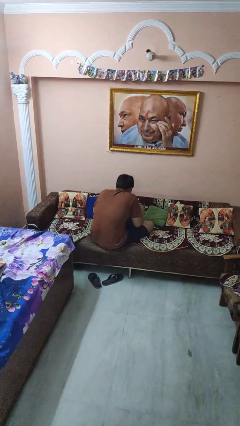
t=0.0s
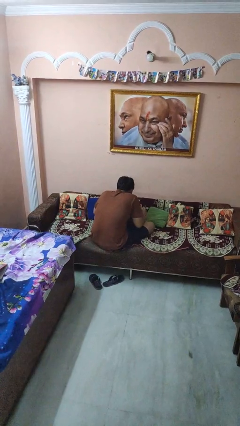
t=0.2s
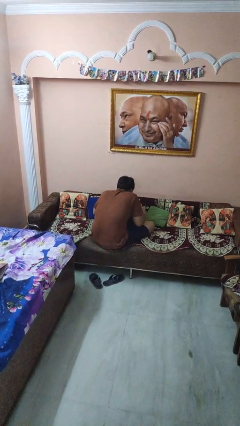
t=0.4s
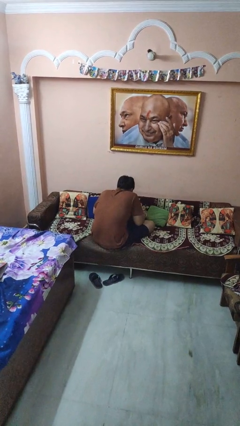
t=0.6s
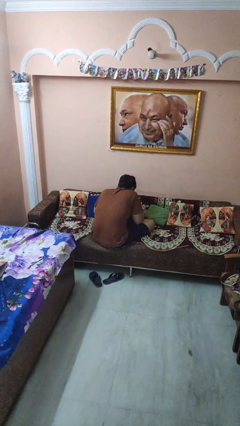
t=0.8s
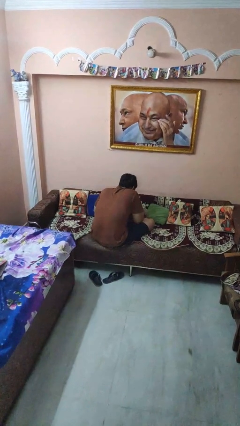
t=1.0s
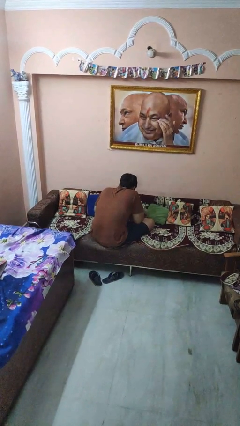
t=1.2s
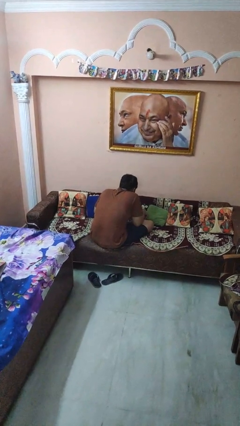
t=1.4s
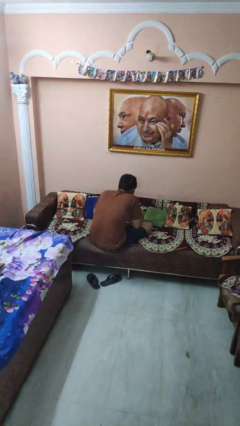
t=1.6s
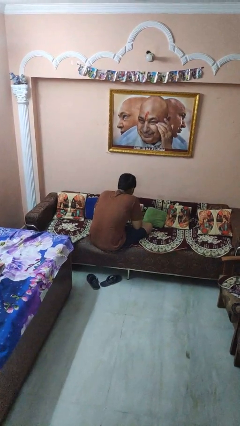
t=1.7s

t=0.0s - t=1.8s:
person searches in couch

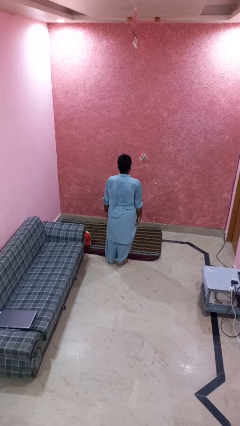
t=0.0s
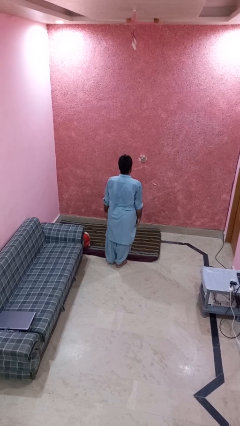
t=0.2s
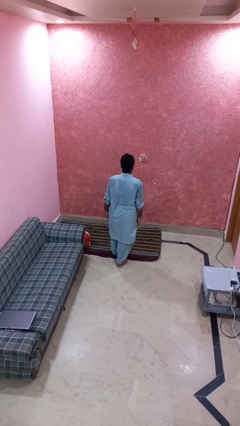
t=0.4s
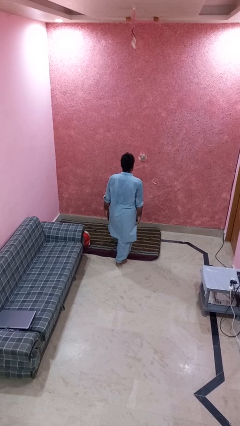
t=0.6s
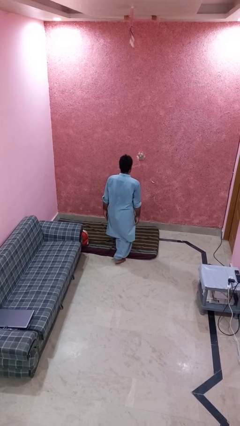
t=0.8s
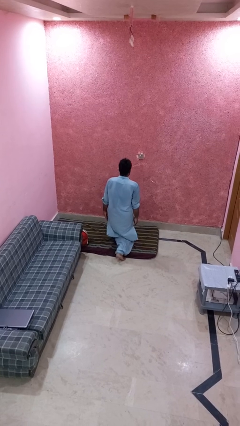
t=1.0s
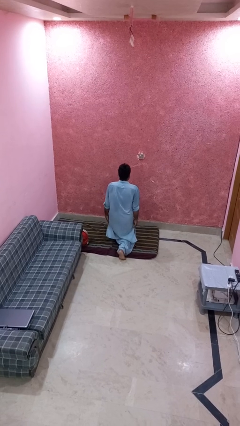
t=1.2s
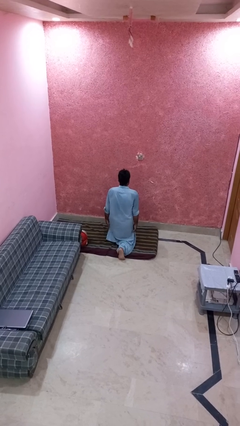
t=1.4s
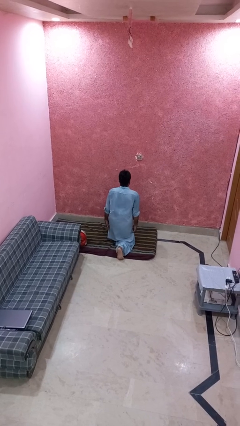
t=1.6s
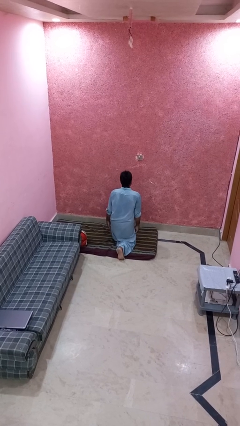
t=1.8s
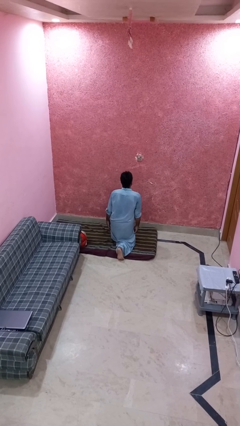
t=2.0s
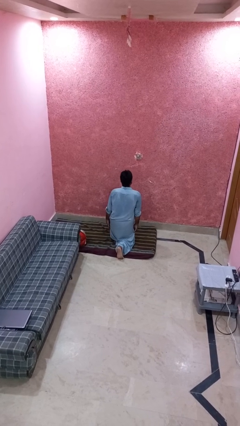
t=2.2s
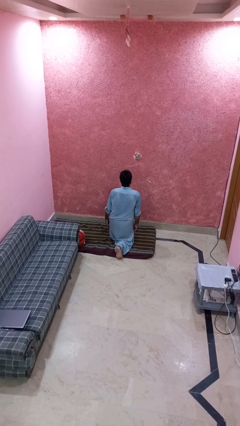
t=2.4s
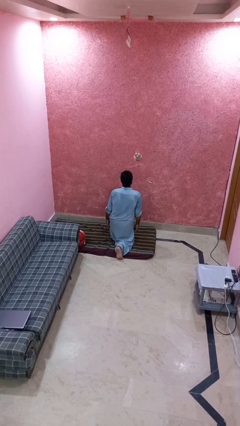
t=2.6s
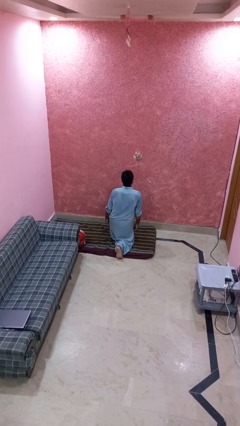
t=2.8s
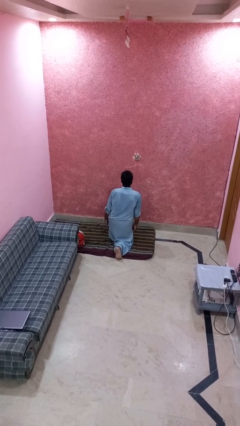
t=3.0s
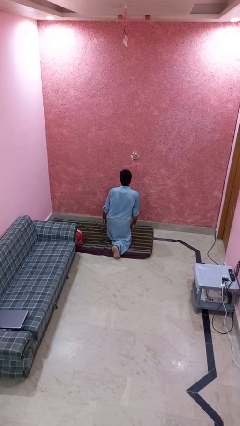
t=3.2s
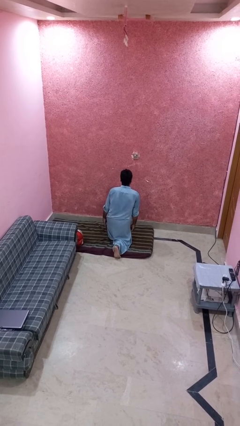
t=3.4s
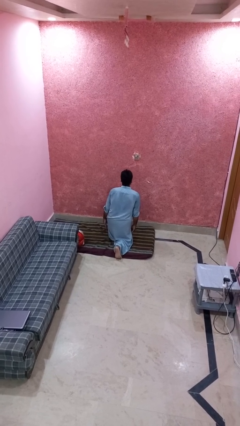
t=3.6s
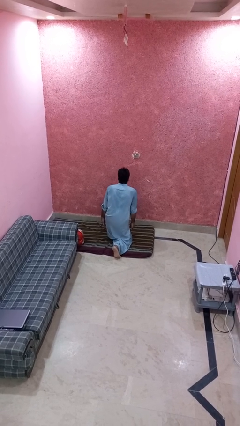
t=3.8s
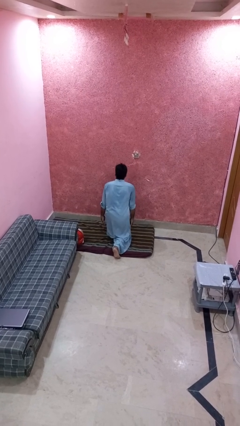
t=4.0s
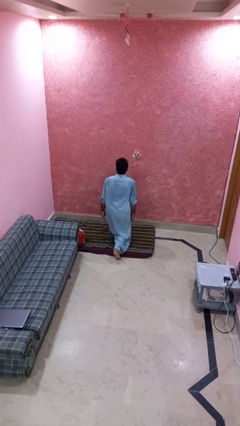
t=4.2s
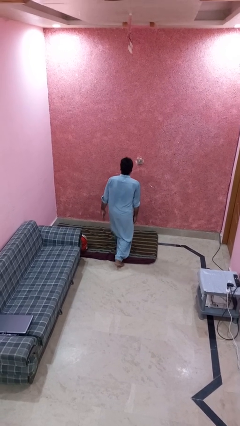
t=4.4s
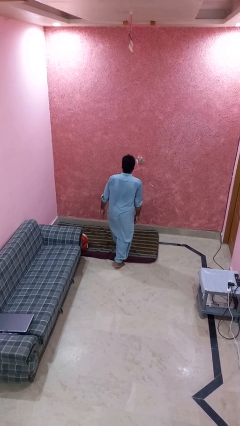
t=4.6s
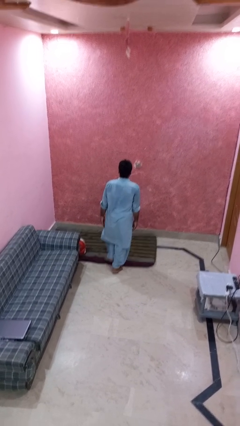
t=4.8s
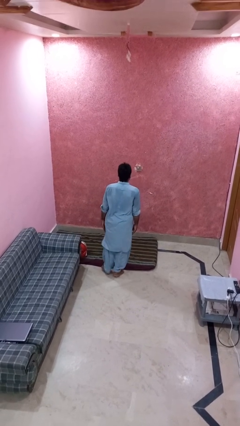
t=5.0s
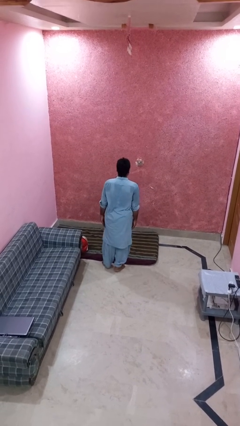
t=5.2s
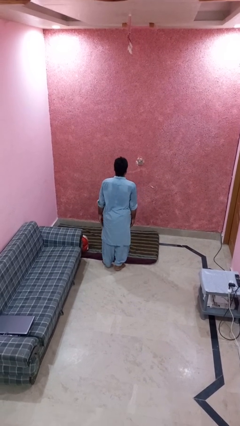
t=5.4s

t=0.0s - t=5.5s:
person exercises with lunges

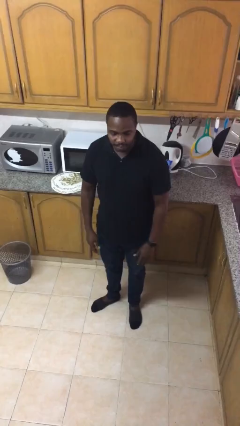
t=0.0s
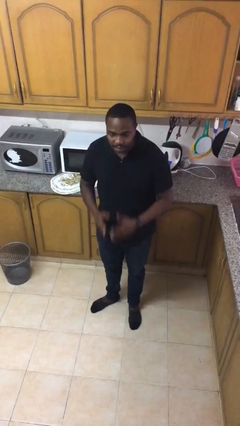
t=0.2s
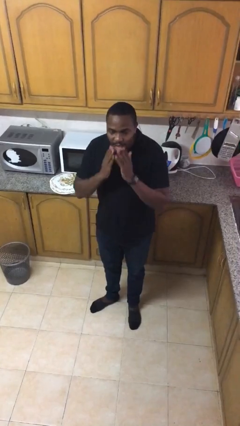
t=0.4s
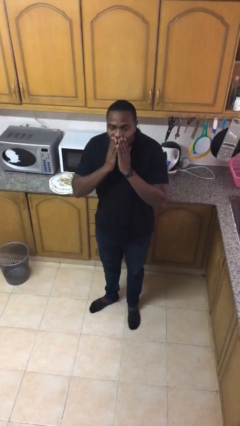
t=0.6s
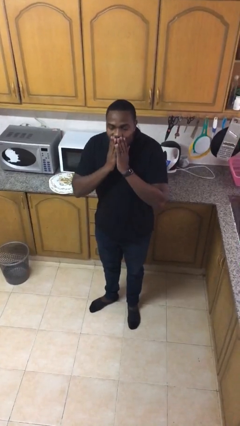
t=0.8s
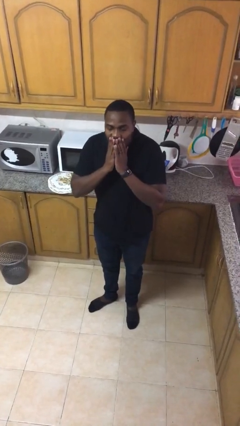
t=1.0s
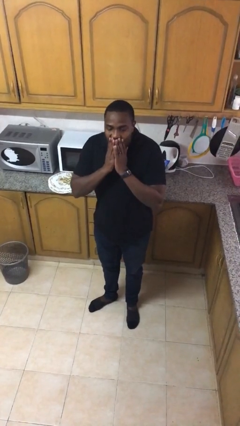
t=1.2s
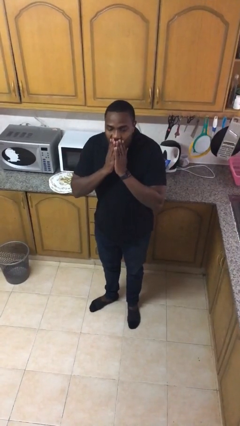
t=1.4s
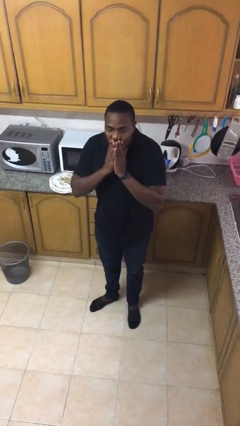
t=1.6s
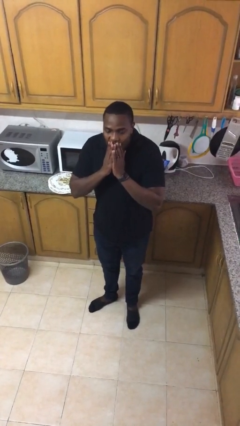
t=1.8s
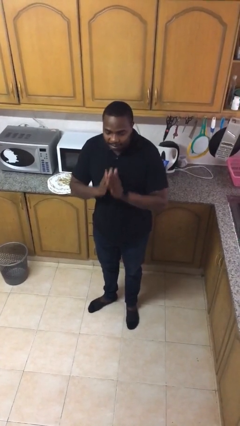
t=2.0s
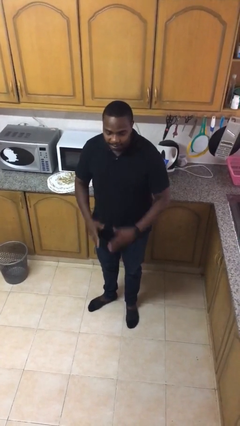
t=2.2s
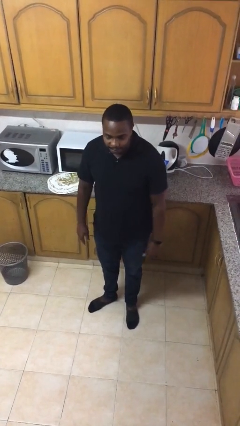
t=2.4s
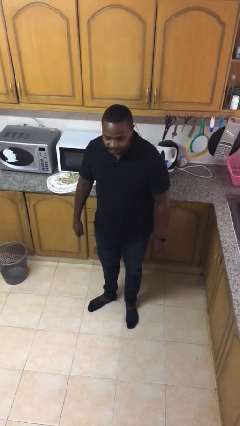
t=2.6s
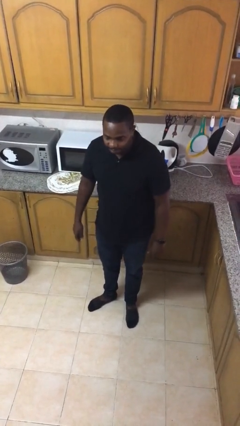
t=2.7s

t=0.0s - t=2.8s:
person yawns

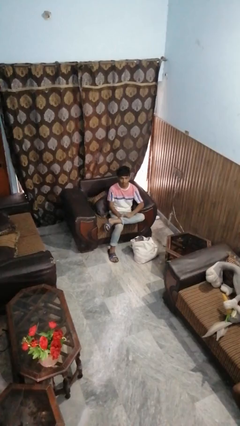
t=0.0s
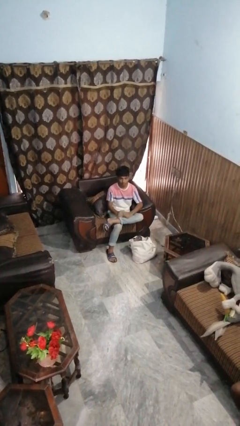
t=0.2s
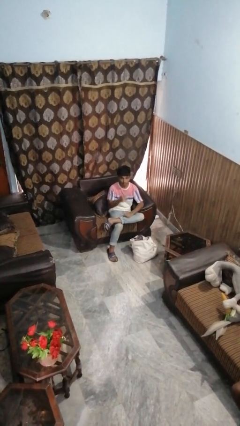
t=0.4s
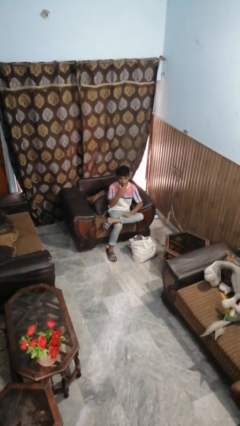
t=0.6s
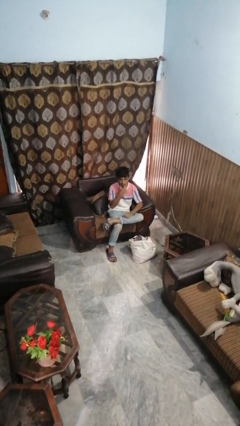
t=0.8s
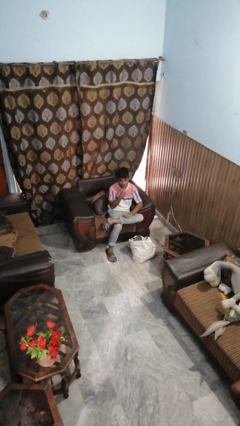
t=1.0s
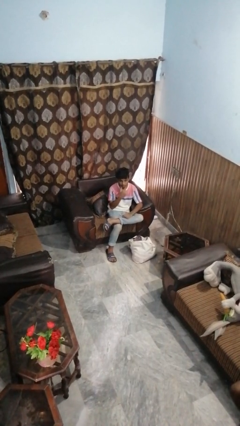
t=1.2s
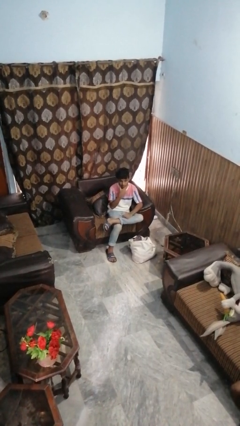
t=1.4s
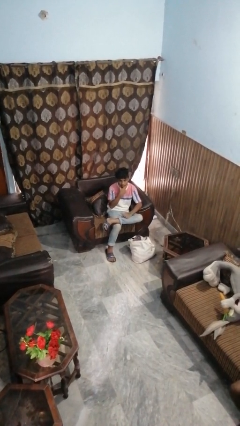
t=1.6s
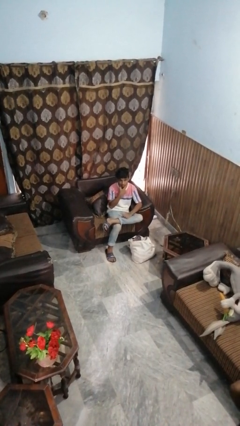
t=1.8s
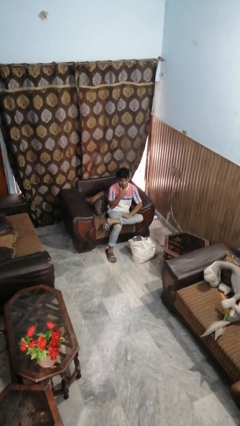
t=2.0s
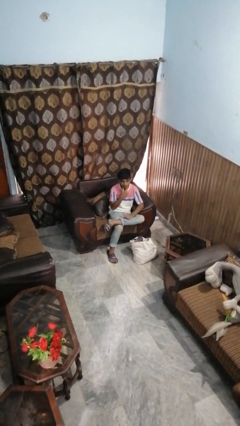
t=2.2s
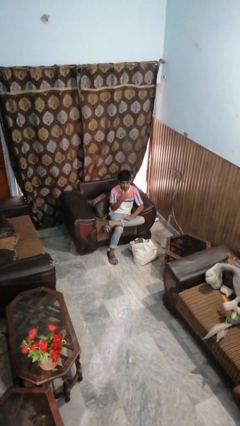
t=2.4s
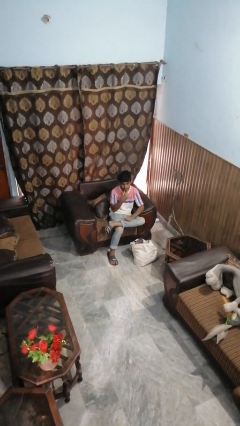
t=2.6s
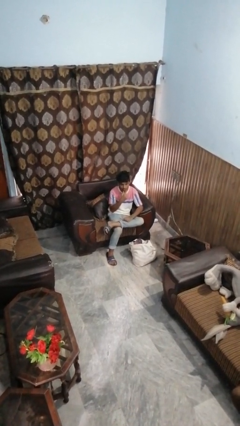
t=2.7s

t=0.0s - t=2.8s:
person strokes chin

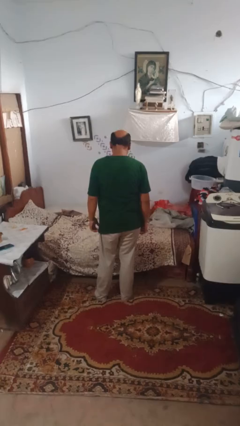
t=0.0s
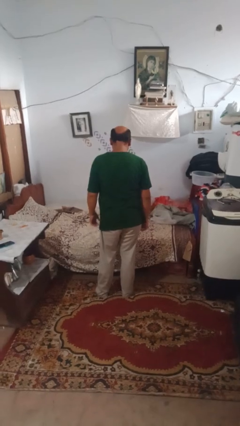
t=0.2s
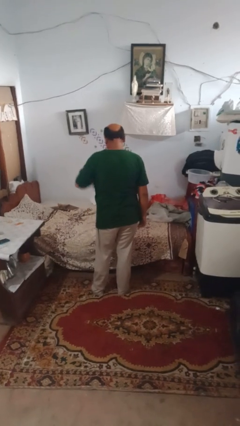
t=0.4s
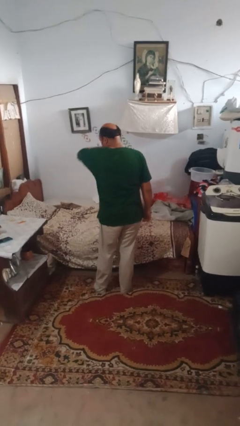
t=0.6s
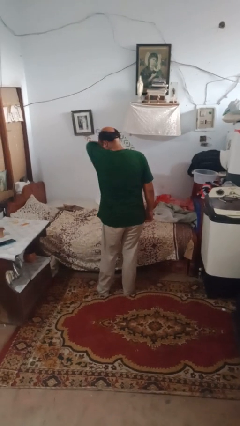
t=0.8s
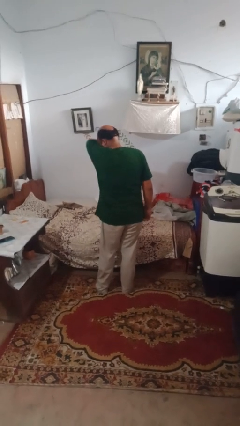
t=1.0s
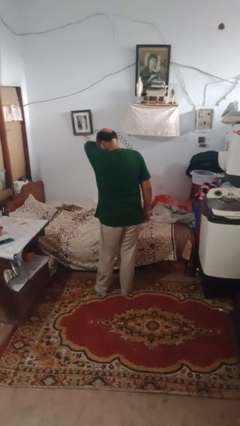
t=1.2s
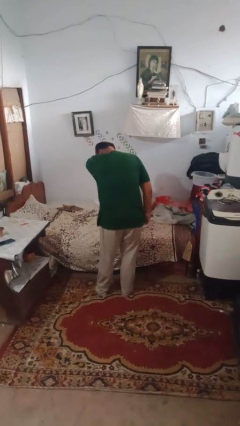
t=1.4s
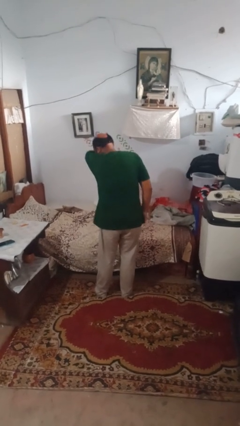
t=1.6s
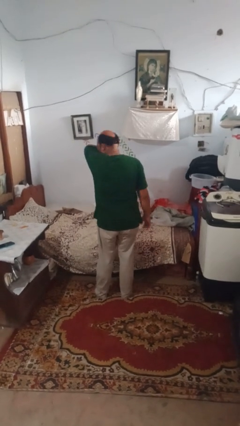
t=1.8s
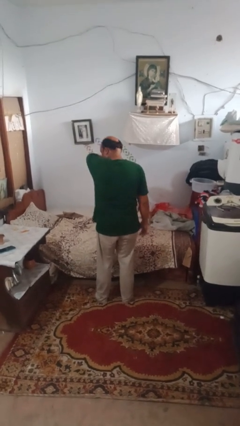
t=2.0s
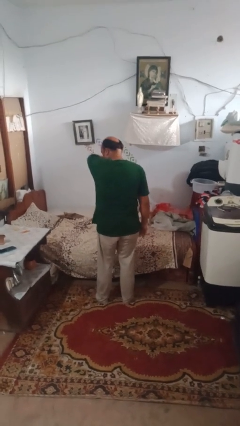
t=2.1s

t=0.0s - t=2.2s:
person sneezes into arm

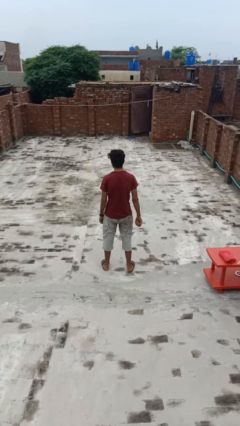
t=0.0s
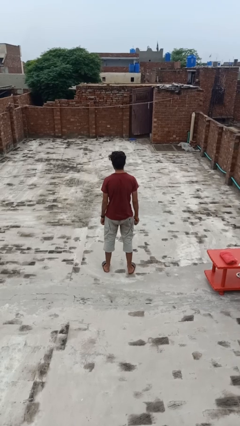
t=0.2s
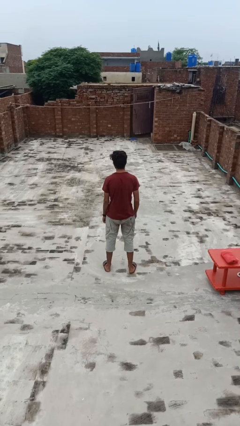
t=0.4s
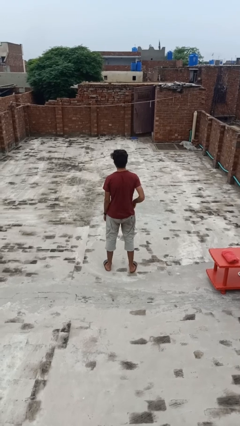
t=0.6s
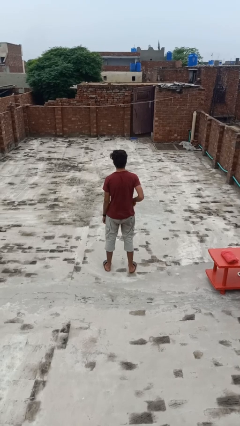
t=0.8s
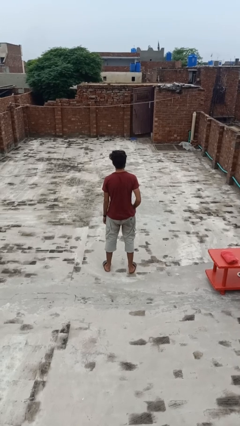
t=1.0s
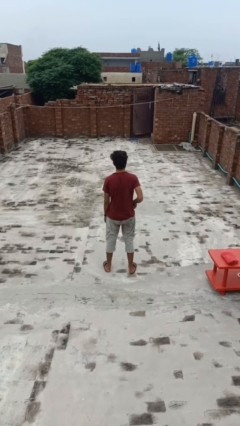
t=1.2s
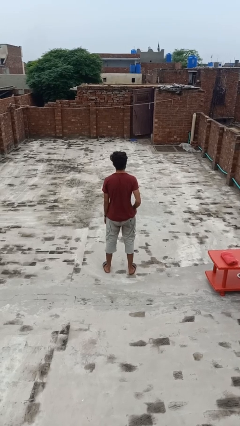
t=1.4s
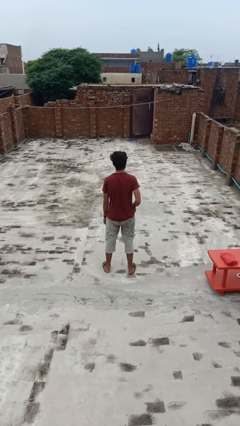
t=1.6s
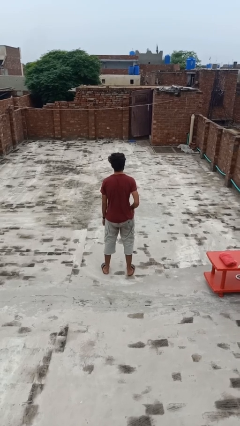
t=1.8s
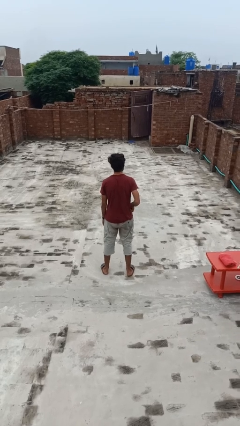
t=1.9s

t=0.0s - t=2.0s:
person rubs foot

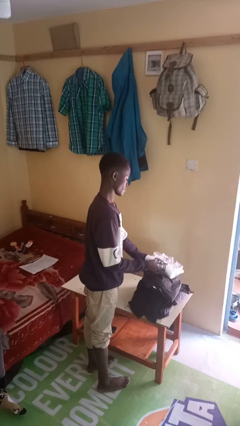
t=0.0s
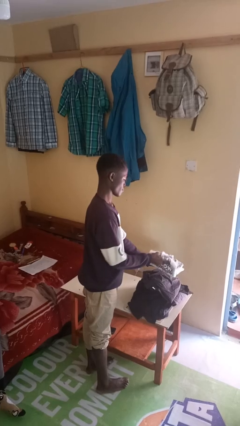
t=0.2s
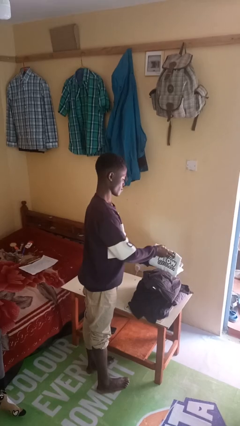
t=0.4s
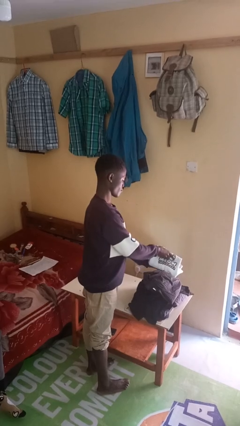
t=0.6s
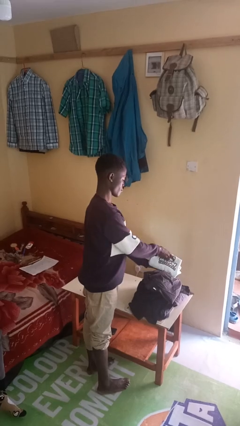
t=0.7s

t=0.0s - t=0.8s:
person folds shirt
